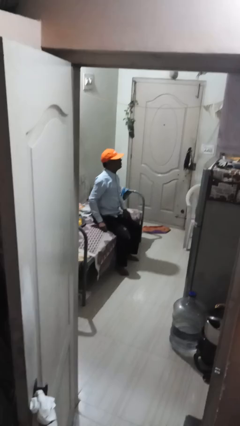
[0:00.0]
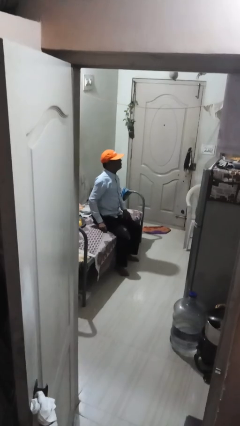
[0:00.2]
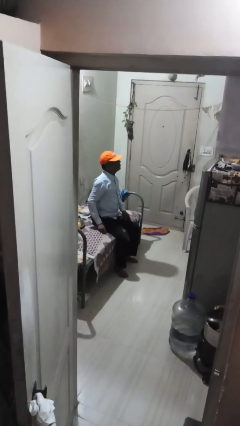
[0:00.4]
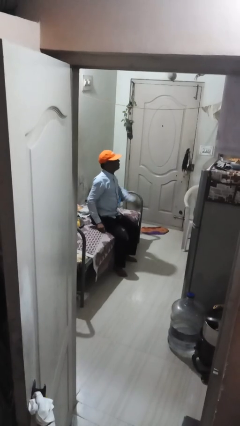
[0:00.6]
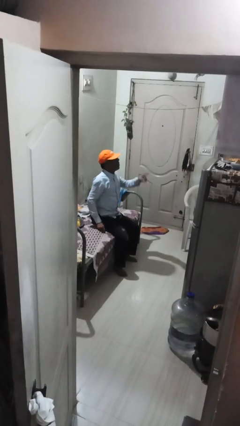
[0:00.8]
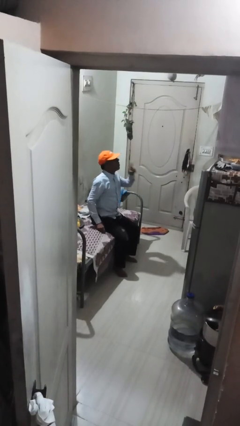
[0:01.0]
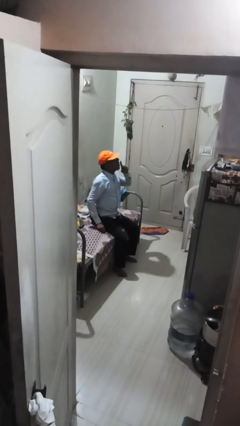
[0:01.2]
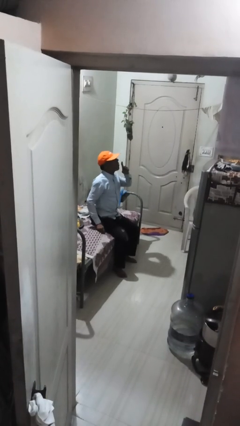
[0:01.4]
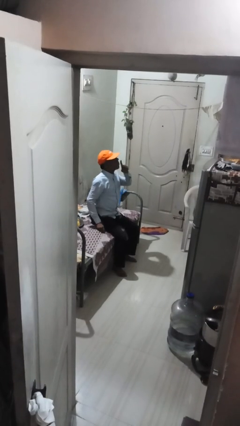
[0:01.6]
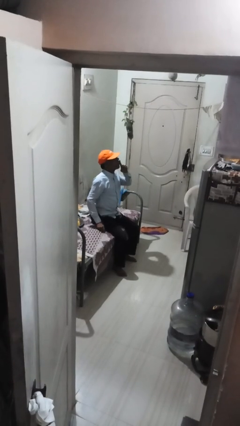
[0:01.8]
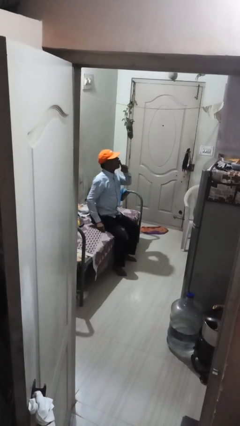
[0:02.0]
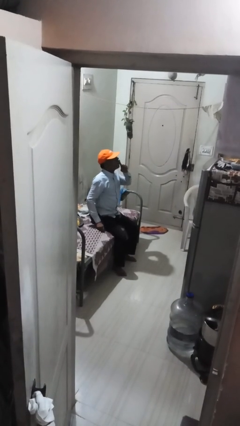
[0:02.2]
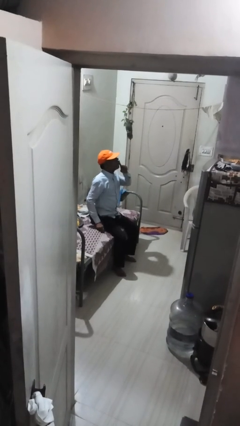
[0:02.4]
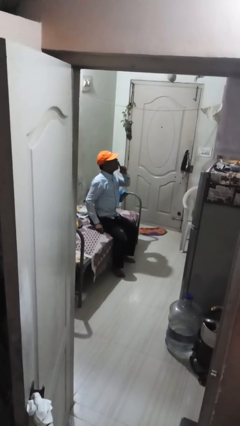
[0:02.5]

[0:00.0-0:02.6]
person gestures be quiet

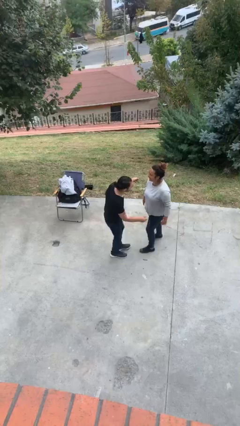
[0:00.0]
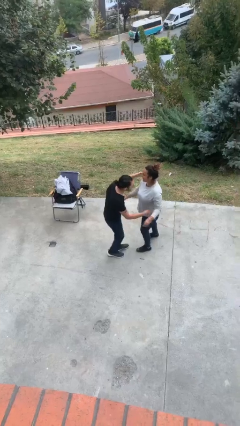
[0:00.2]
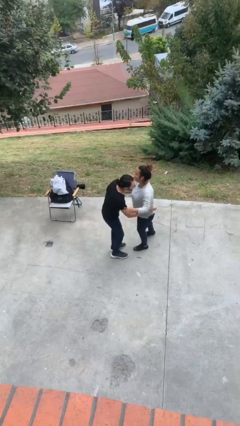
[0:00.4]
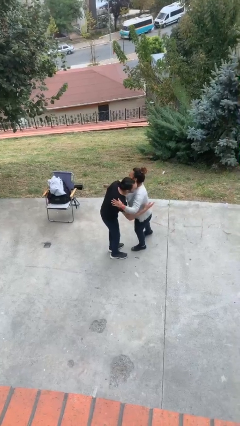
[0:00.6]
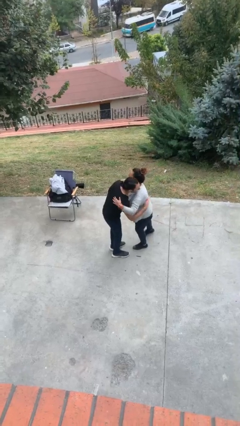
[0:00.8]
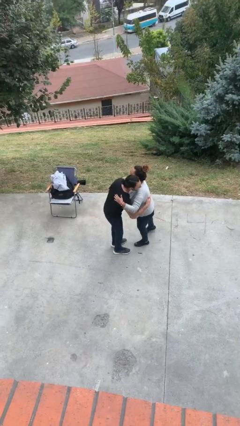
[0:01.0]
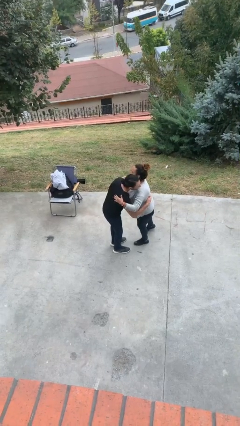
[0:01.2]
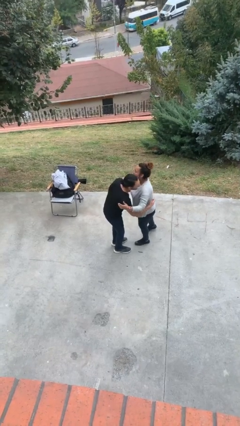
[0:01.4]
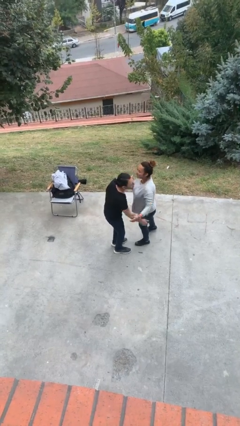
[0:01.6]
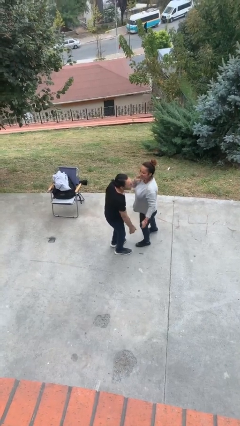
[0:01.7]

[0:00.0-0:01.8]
person embraces person

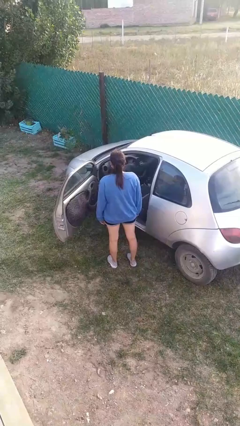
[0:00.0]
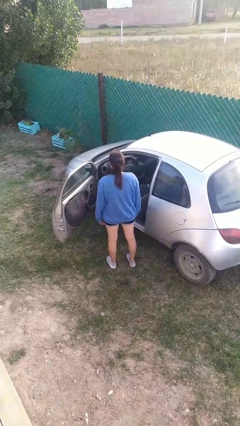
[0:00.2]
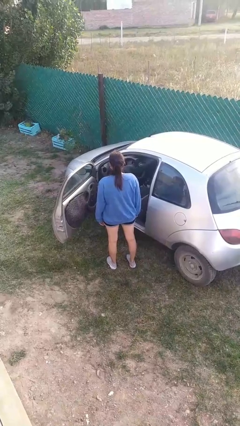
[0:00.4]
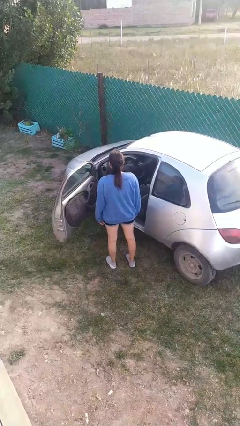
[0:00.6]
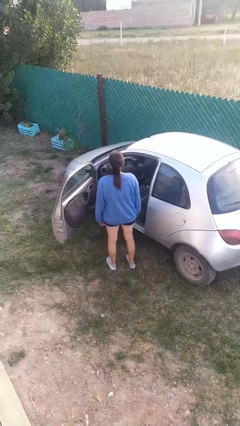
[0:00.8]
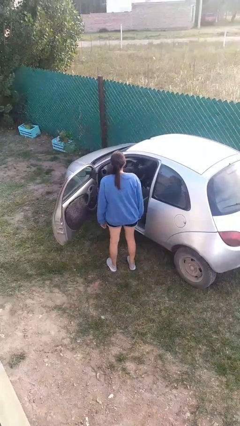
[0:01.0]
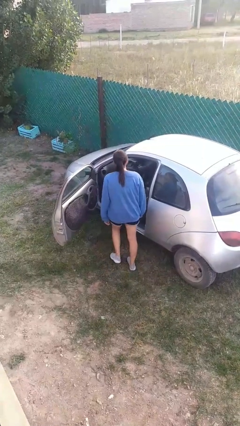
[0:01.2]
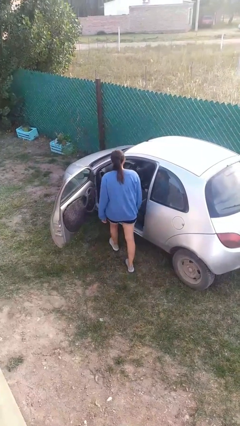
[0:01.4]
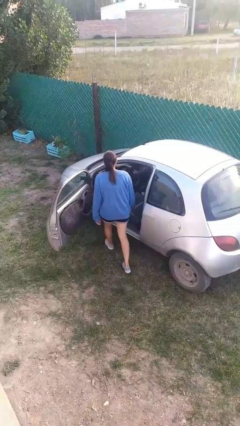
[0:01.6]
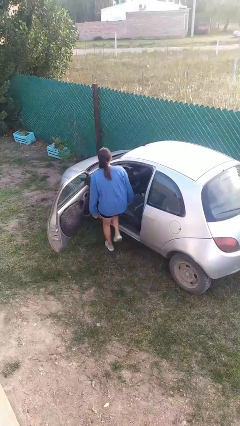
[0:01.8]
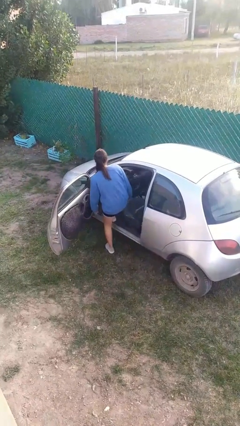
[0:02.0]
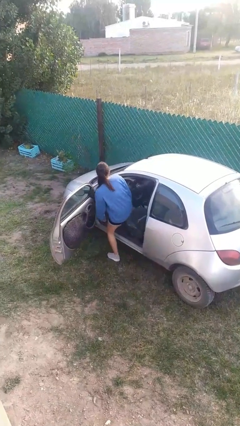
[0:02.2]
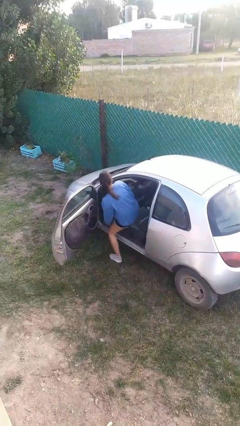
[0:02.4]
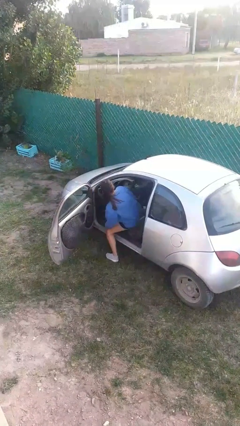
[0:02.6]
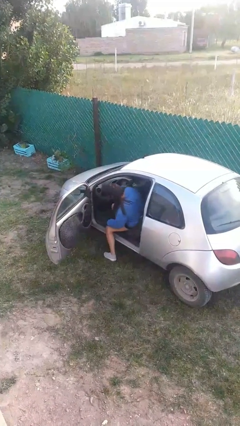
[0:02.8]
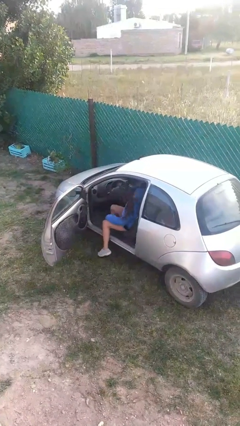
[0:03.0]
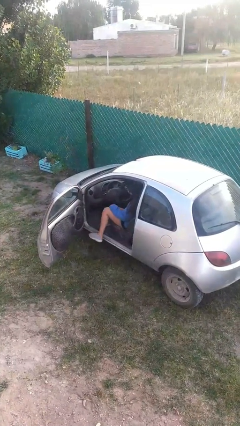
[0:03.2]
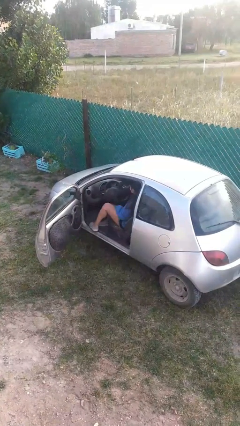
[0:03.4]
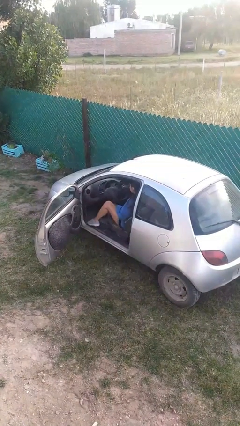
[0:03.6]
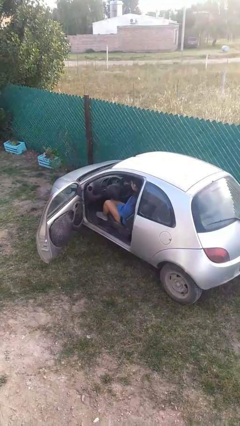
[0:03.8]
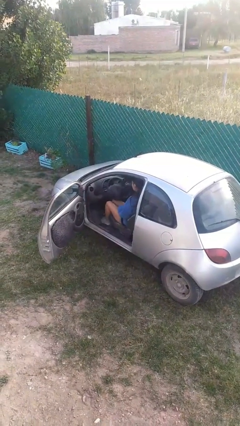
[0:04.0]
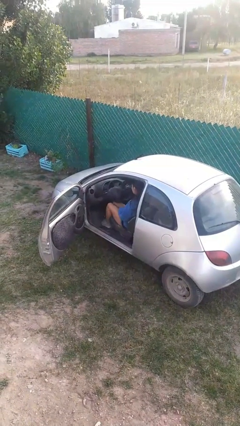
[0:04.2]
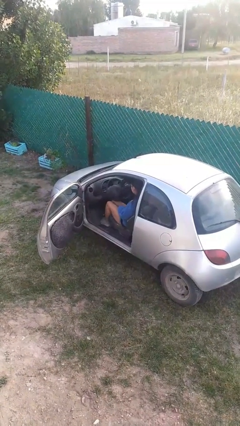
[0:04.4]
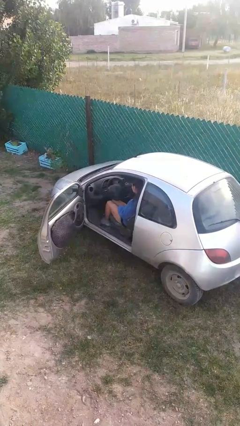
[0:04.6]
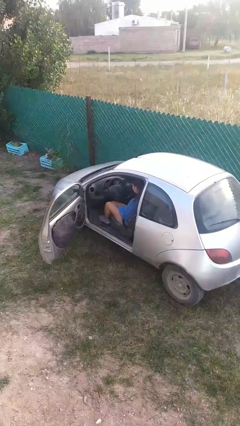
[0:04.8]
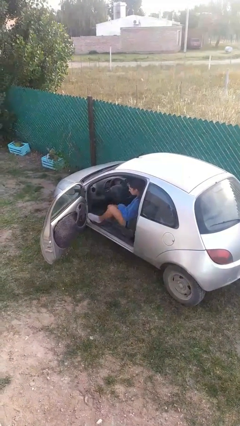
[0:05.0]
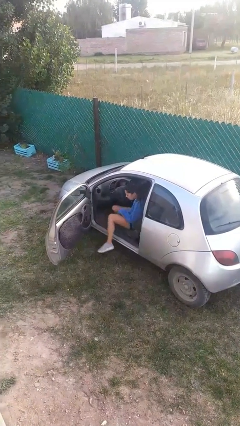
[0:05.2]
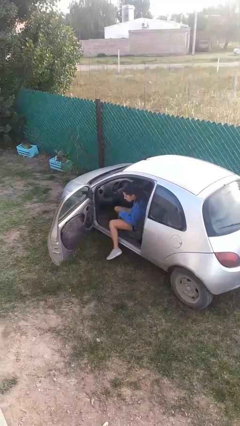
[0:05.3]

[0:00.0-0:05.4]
person enters car

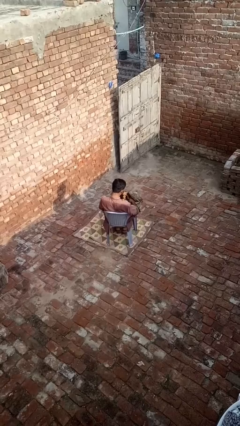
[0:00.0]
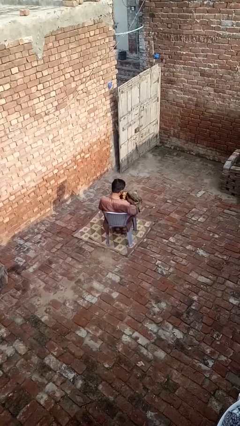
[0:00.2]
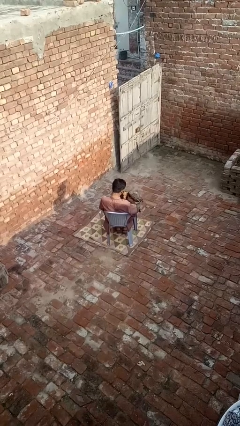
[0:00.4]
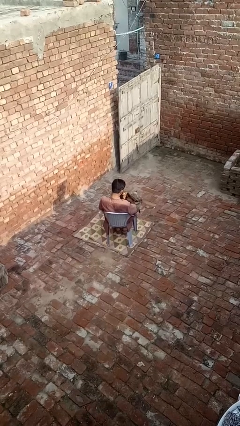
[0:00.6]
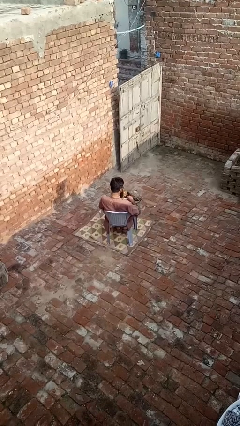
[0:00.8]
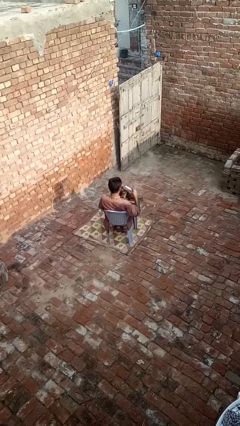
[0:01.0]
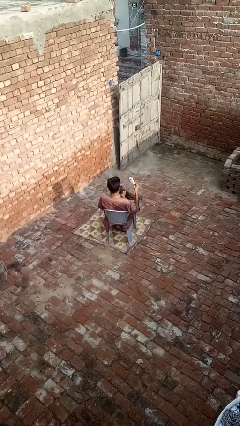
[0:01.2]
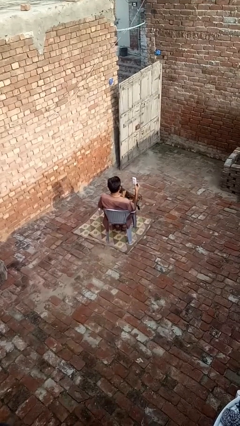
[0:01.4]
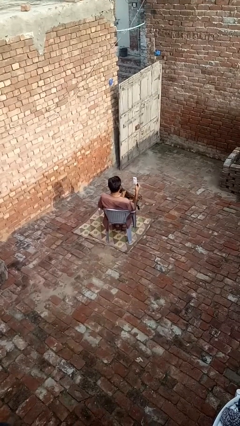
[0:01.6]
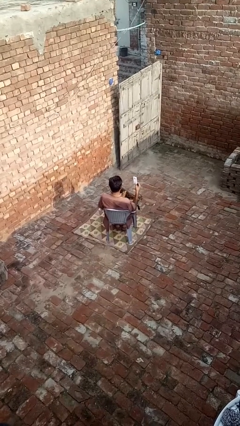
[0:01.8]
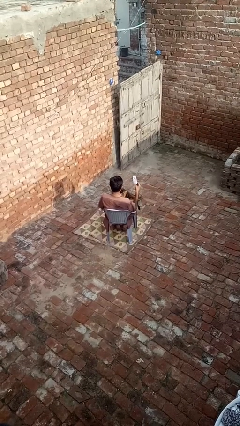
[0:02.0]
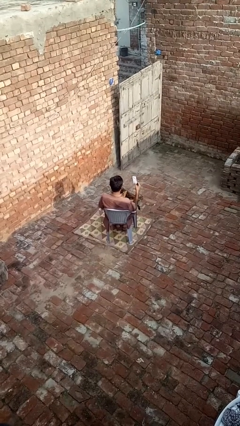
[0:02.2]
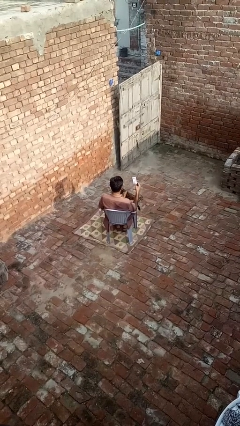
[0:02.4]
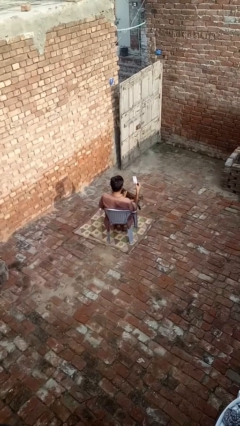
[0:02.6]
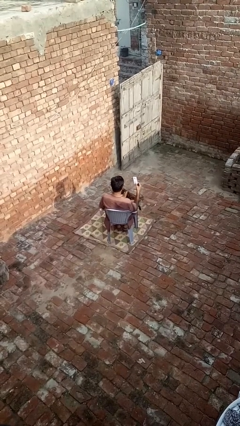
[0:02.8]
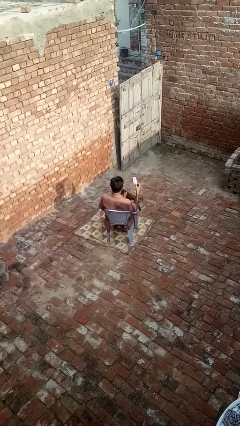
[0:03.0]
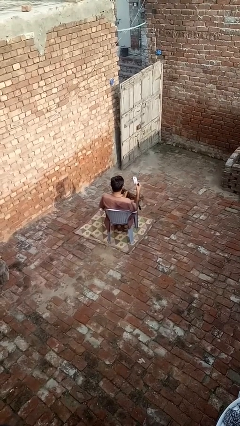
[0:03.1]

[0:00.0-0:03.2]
person takes object from purse

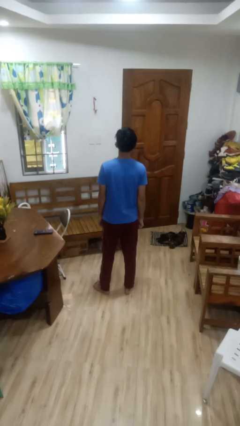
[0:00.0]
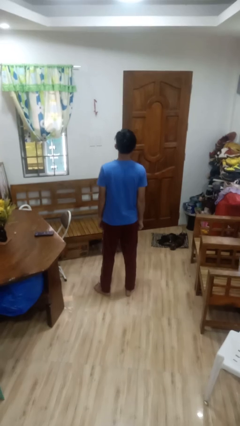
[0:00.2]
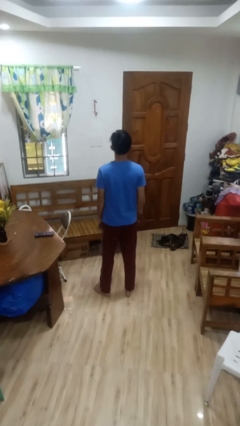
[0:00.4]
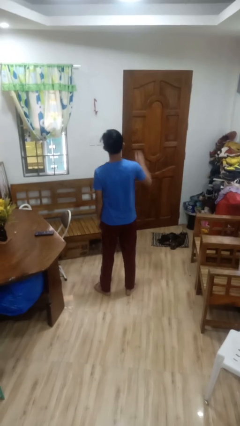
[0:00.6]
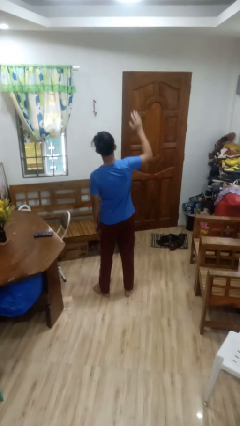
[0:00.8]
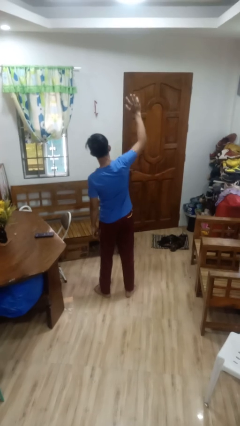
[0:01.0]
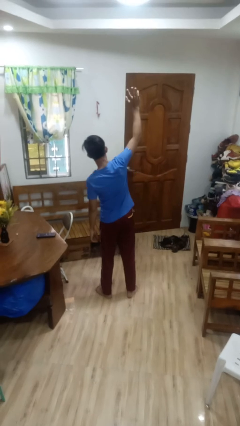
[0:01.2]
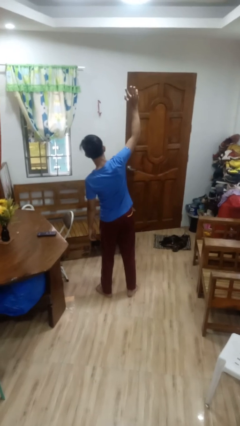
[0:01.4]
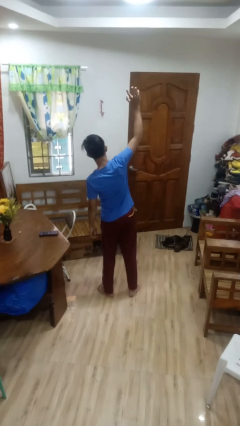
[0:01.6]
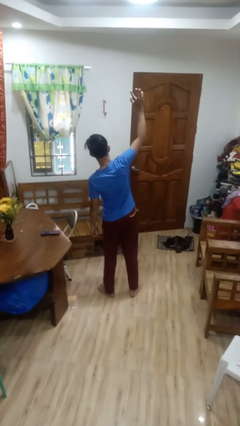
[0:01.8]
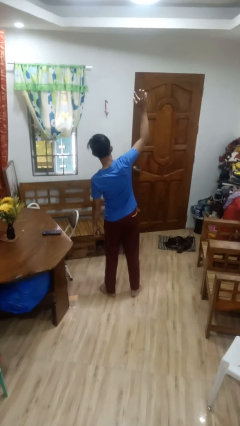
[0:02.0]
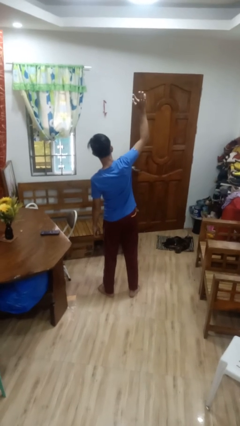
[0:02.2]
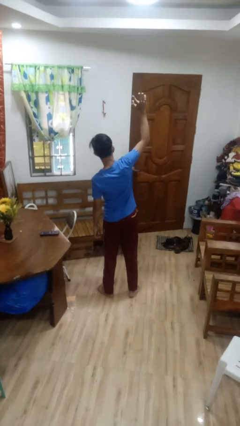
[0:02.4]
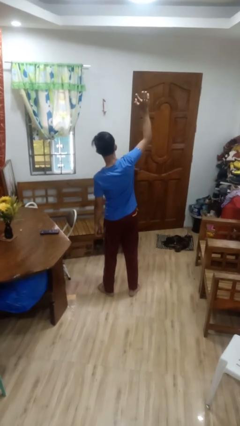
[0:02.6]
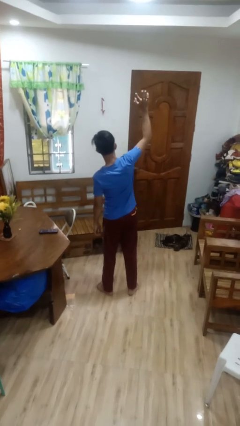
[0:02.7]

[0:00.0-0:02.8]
person gestures raise hand

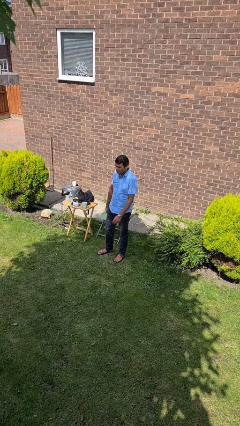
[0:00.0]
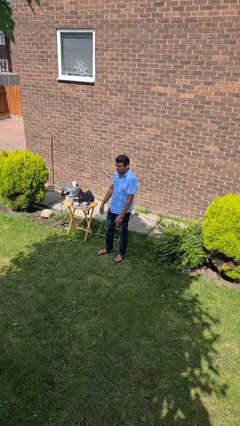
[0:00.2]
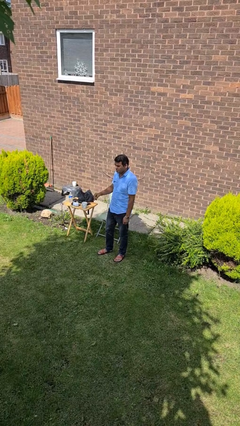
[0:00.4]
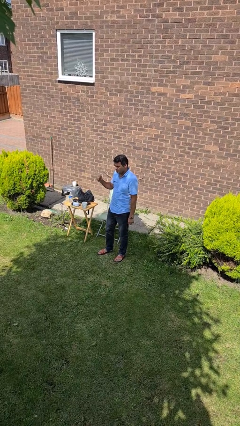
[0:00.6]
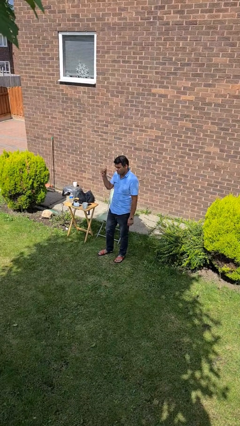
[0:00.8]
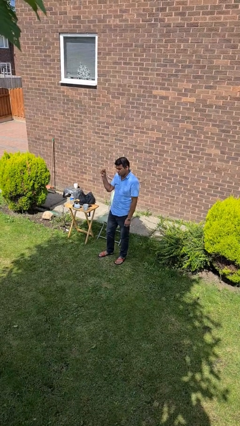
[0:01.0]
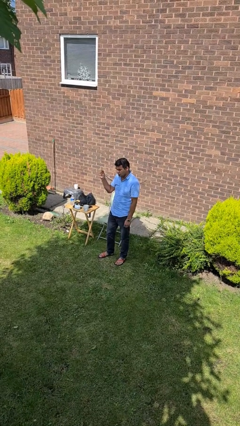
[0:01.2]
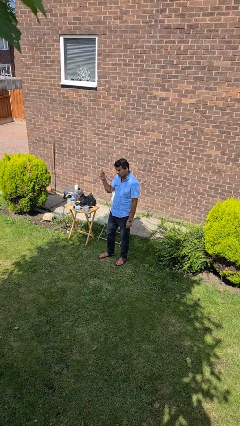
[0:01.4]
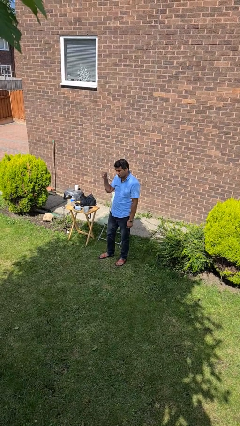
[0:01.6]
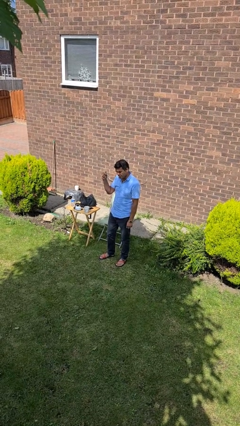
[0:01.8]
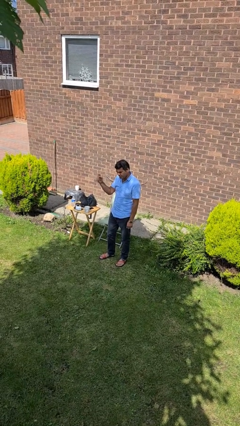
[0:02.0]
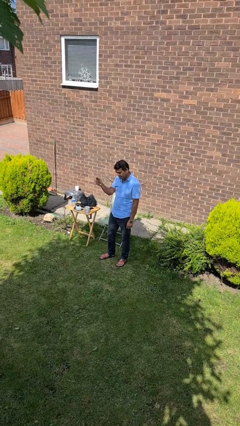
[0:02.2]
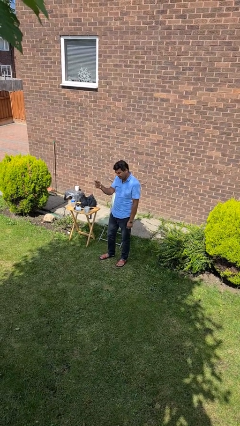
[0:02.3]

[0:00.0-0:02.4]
person snaps fingers
